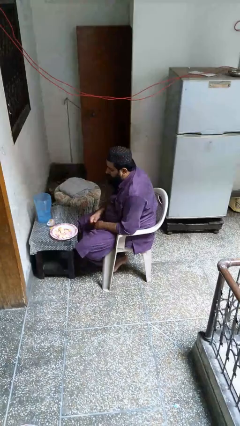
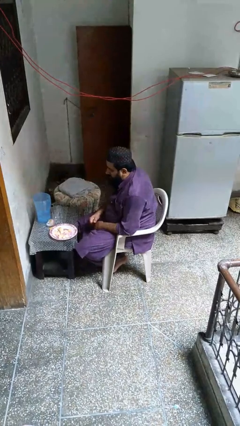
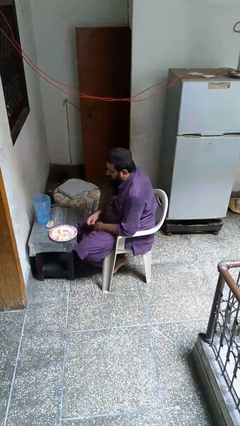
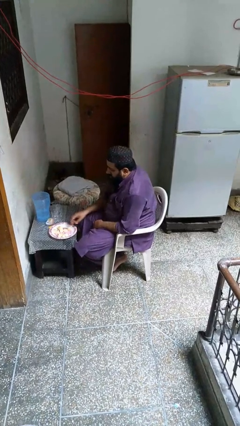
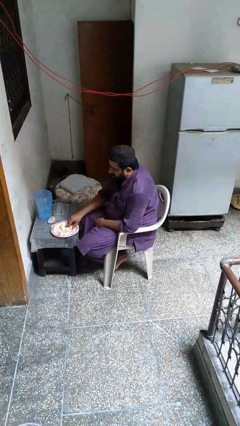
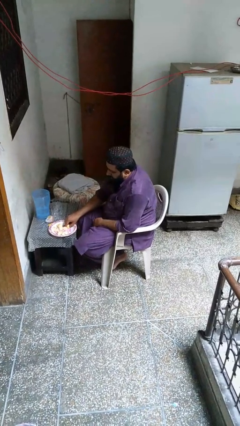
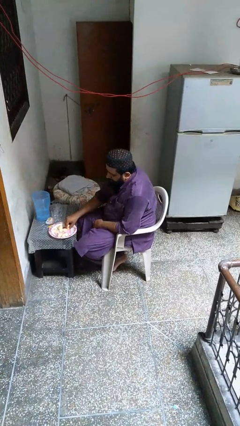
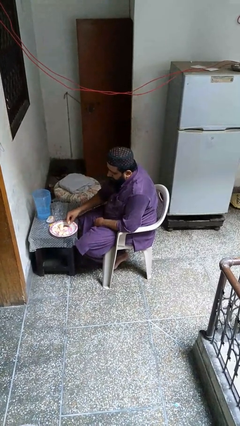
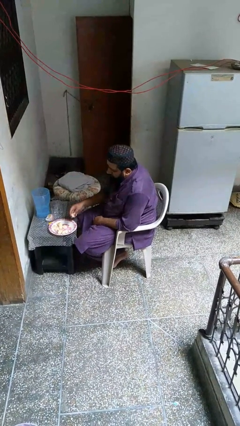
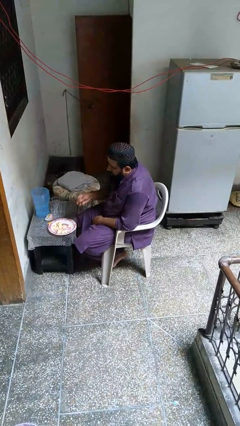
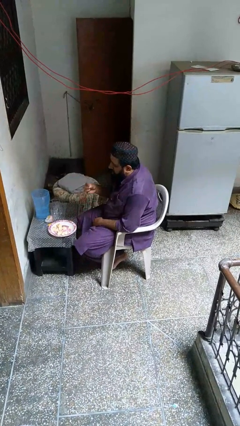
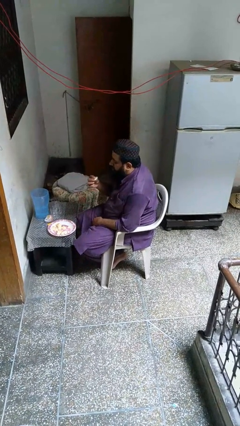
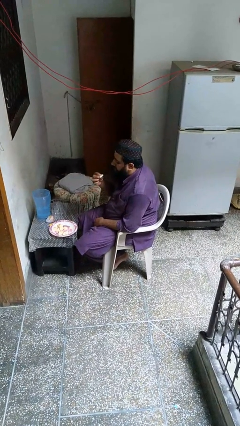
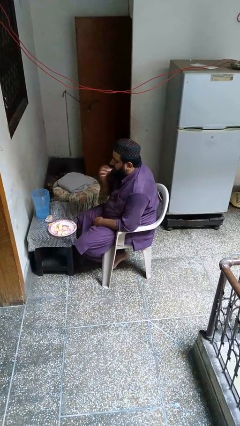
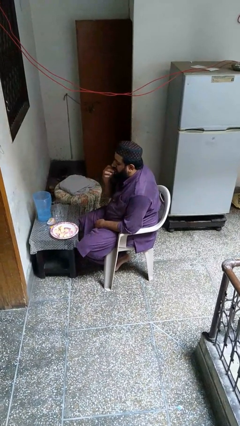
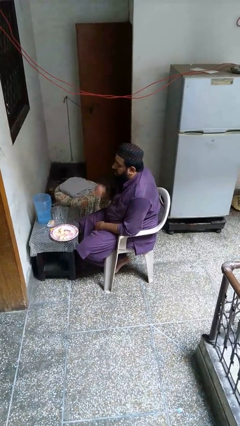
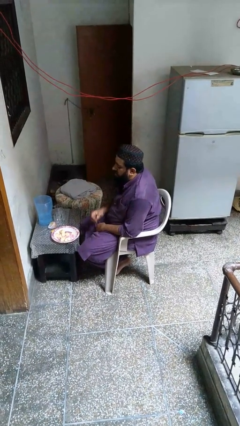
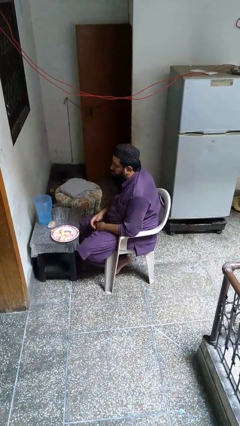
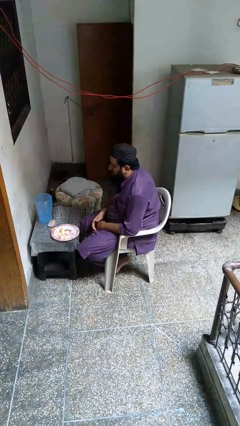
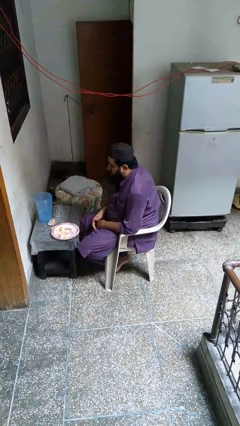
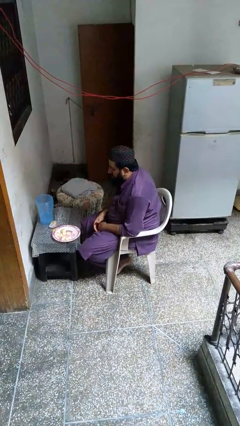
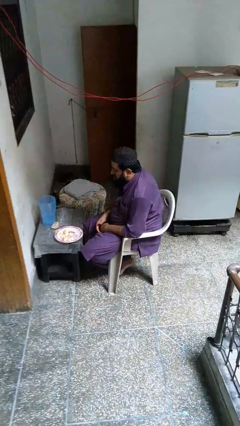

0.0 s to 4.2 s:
person eats with hands

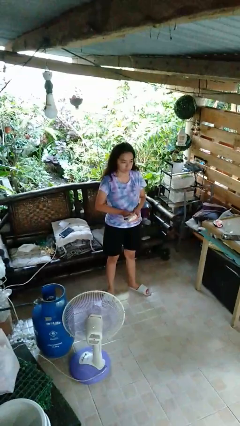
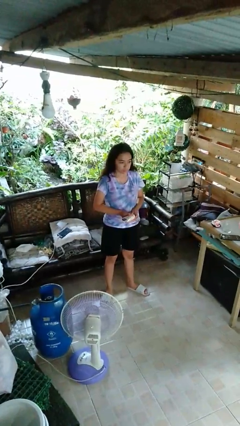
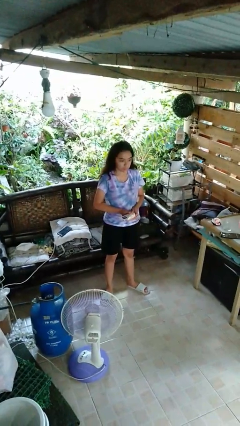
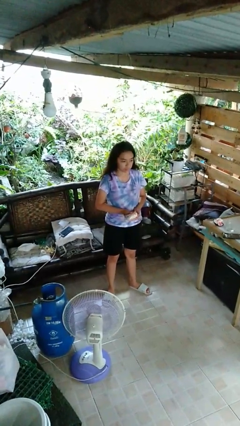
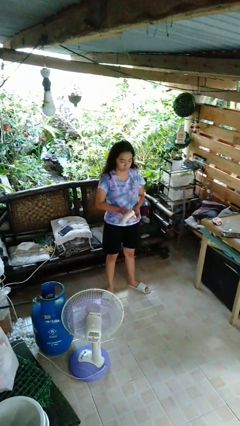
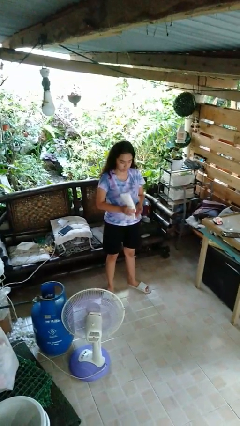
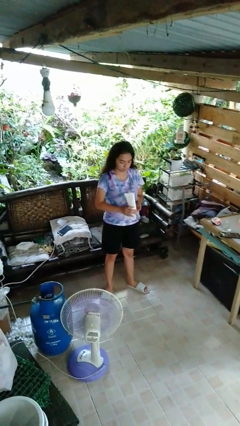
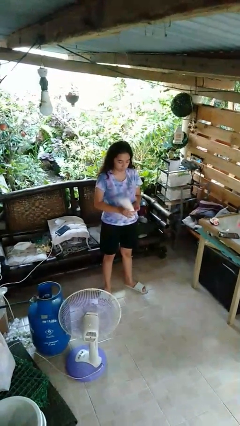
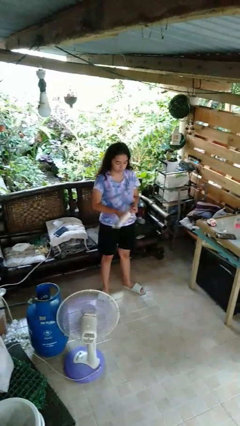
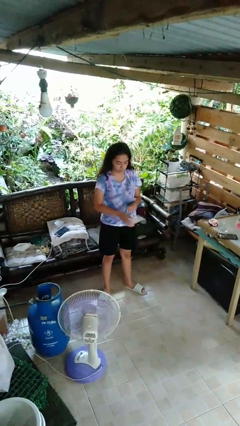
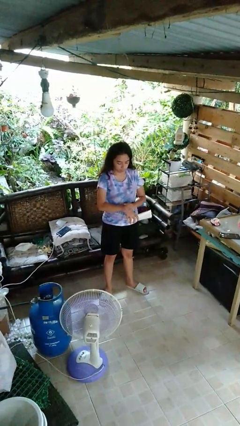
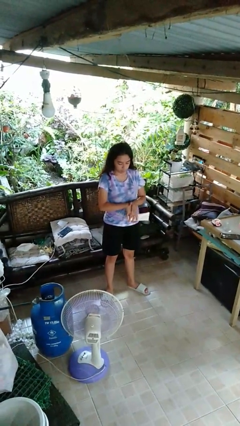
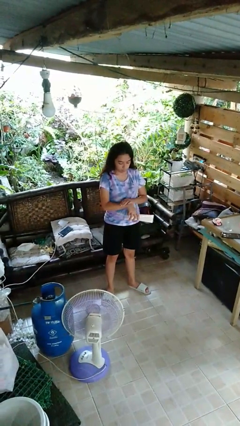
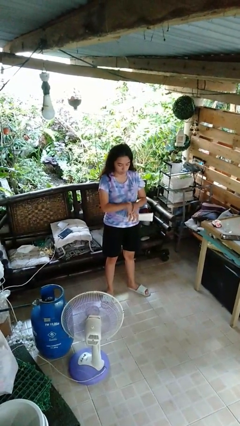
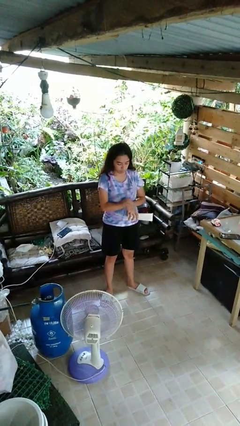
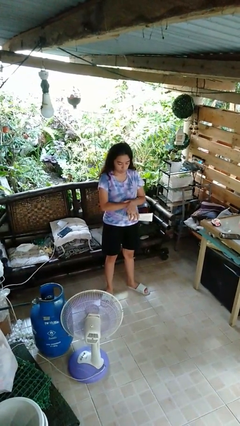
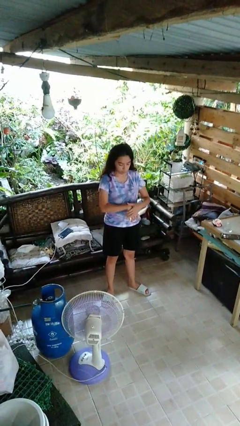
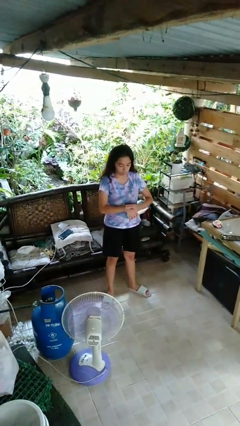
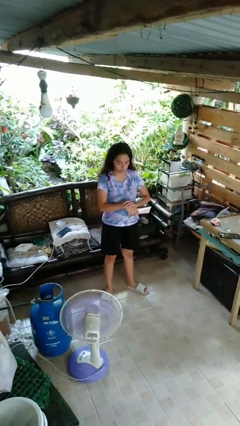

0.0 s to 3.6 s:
person applies sunscreen

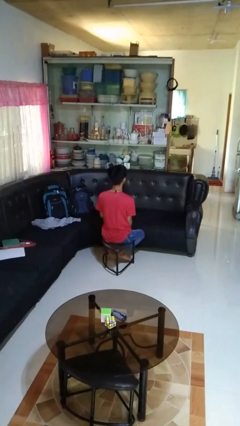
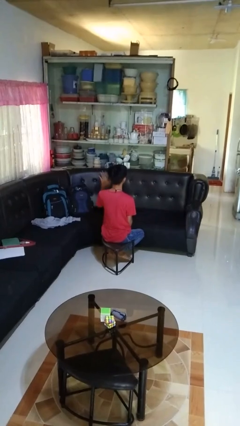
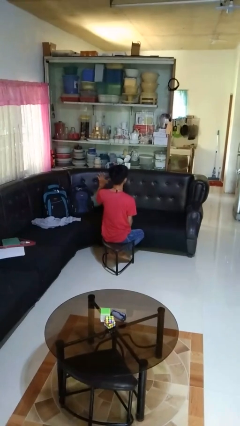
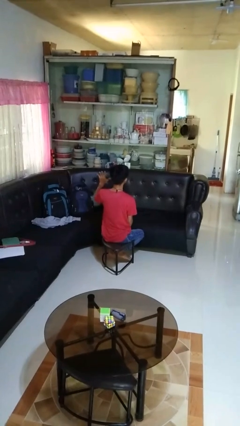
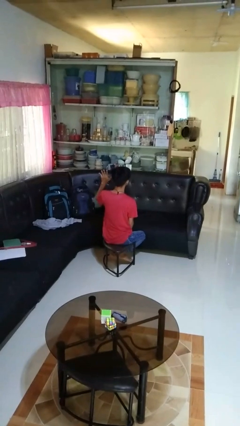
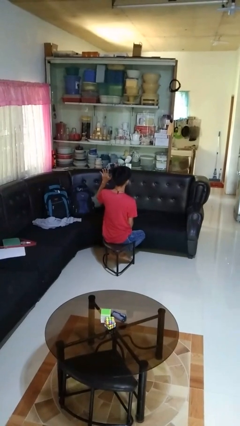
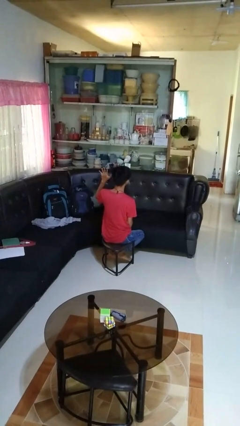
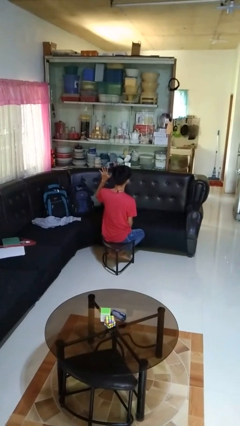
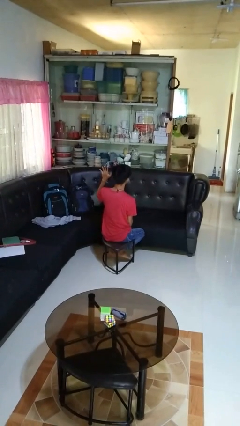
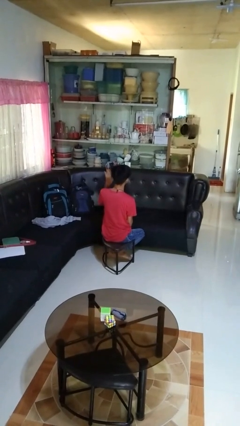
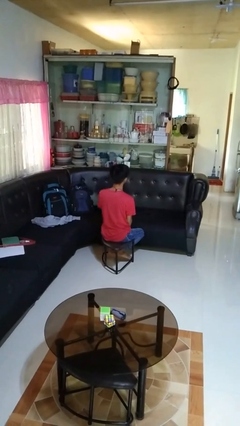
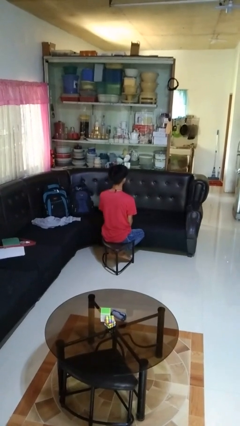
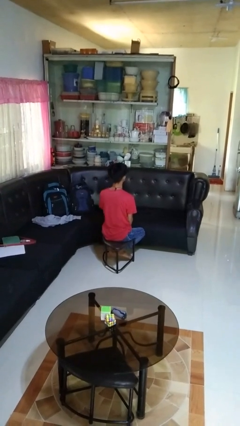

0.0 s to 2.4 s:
person gestures number five

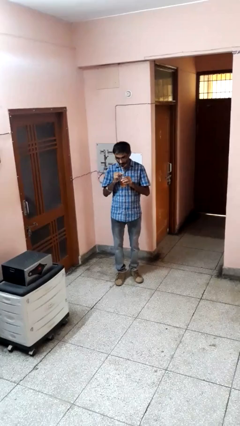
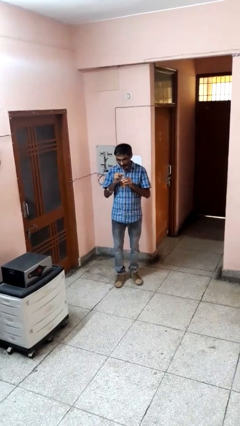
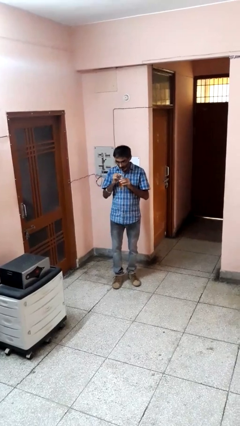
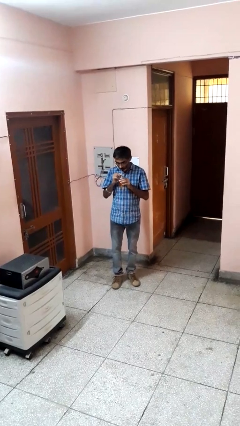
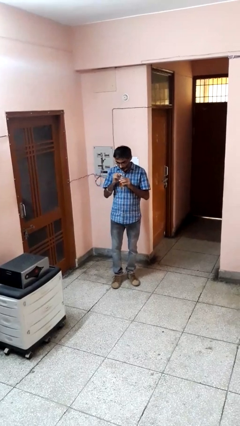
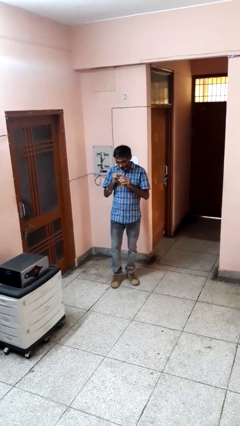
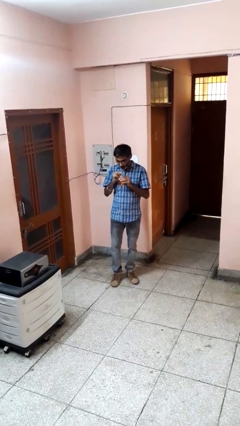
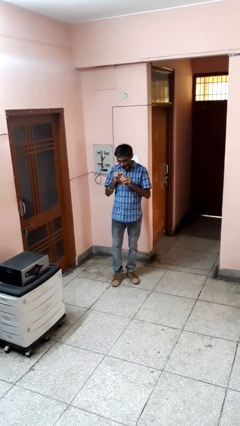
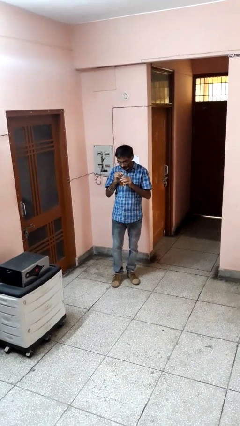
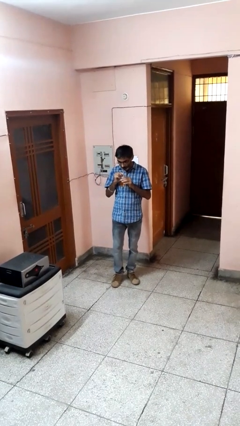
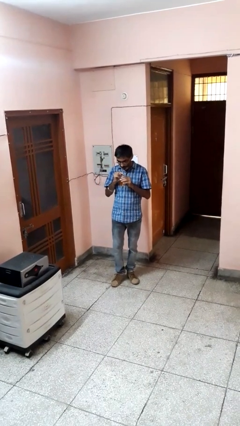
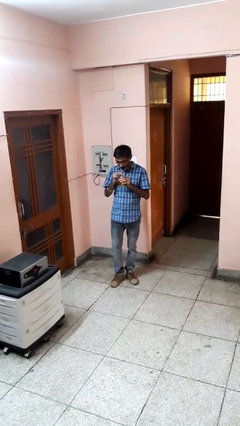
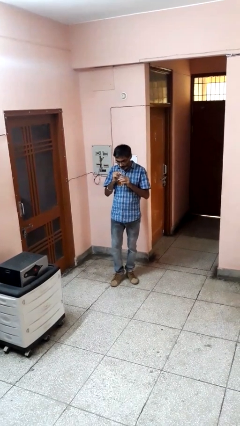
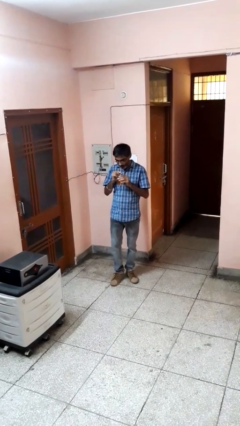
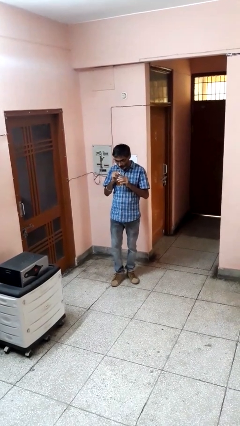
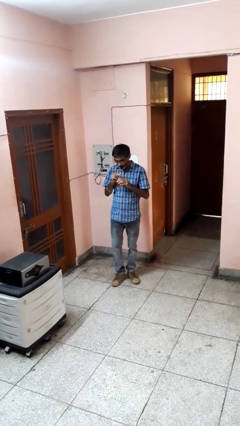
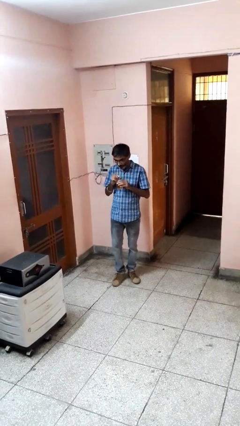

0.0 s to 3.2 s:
person drinks from straw

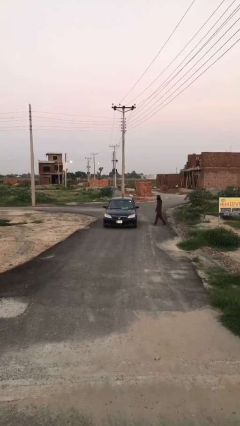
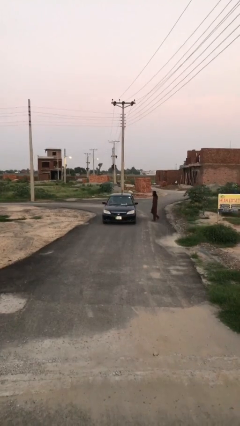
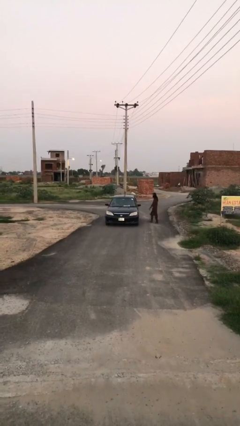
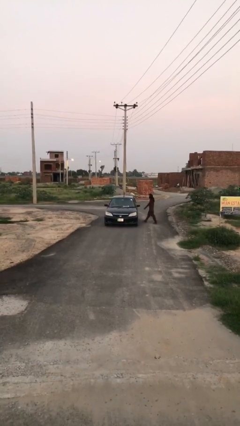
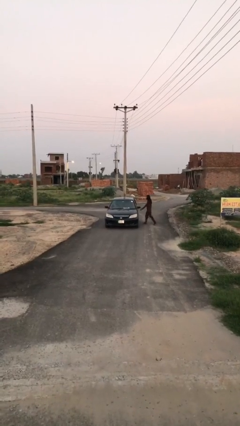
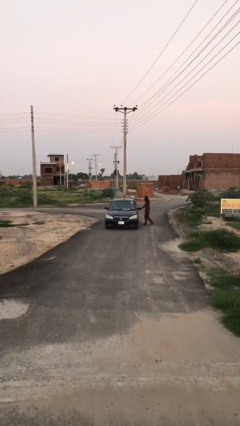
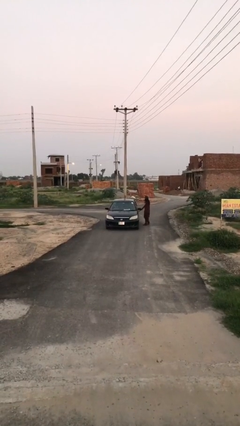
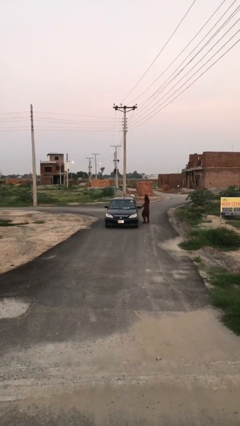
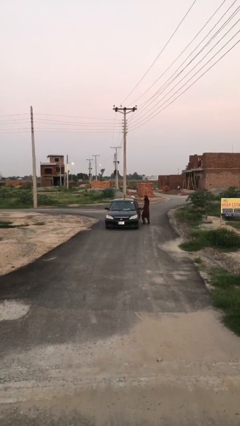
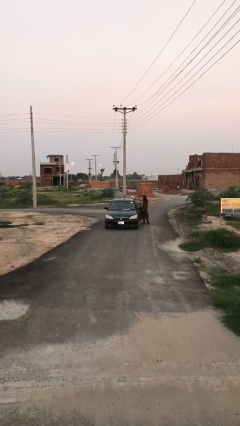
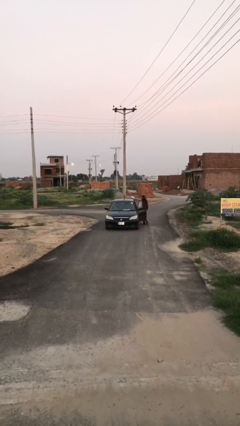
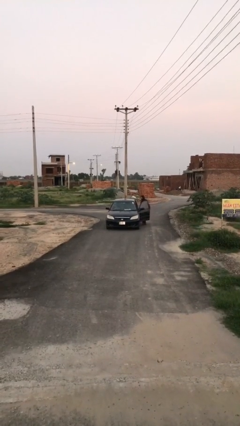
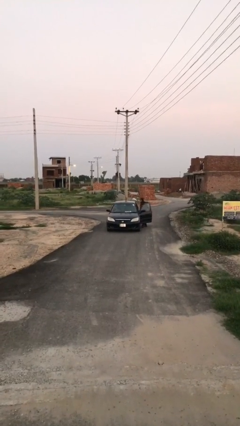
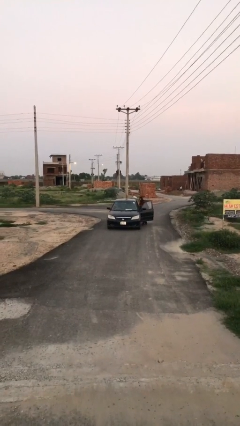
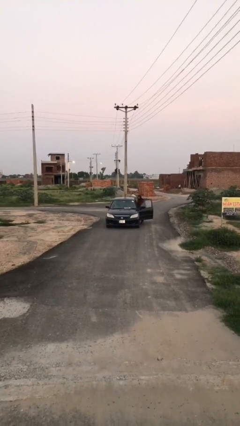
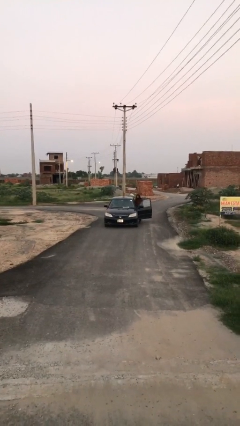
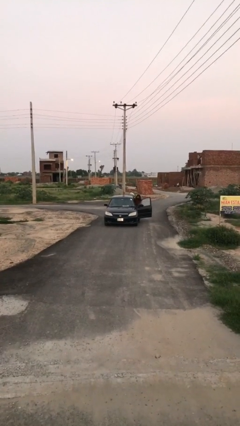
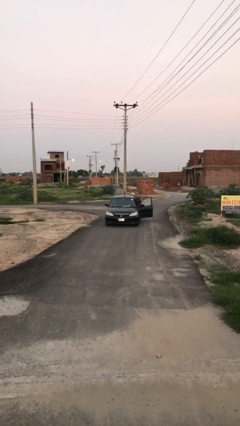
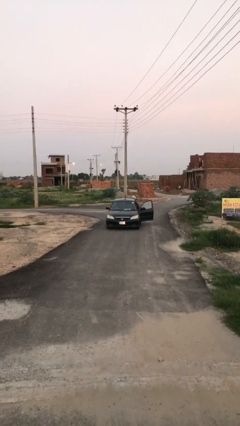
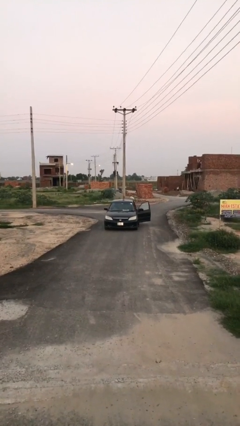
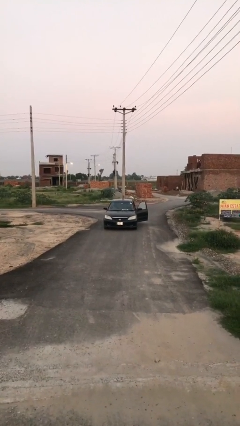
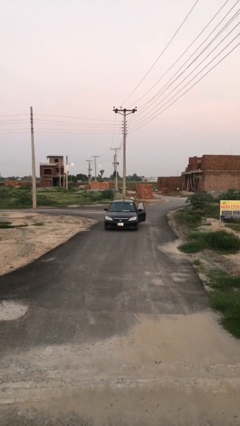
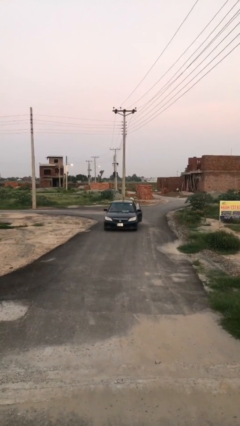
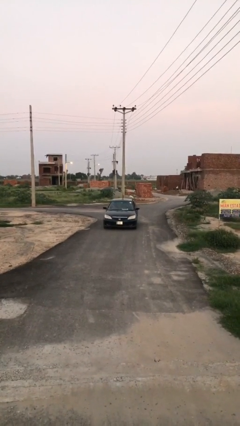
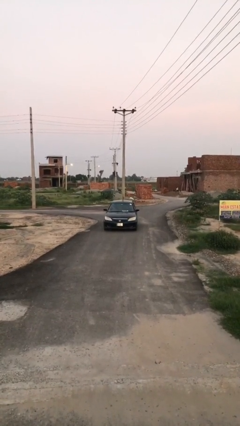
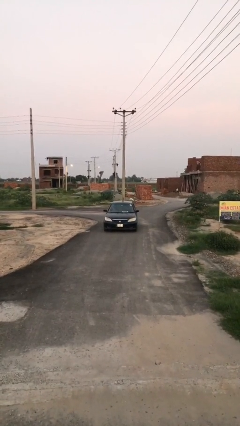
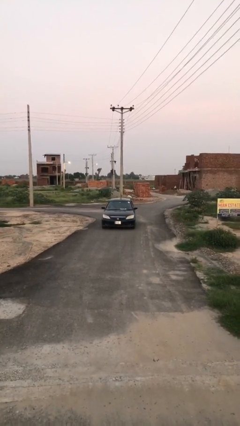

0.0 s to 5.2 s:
car picks up person
